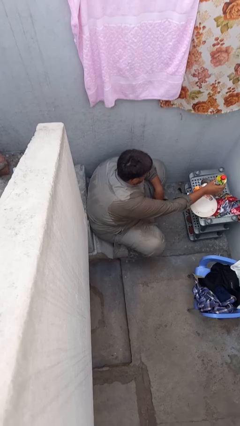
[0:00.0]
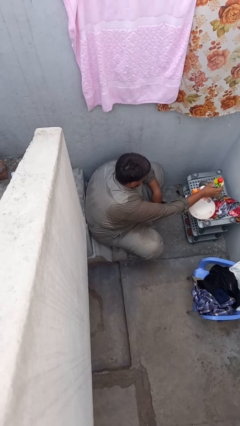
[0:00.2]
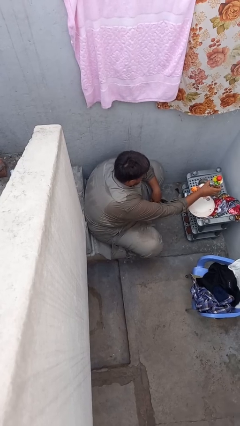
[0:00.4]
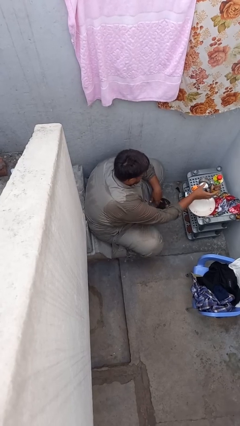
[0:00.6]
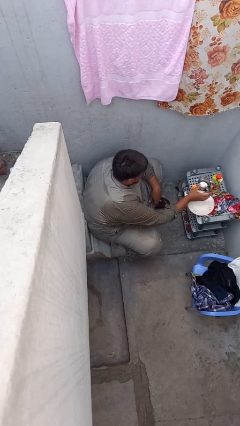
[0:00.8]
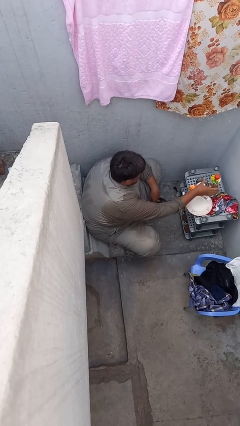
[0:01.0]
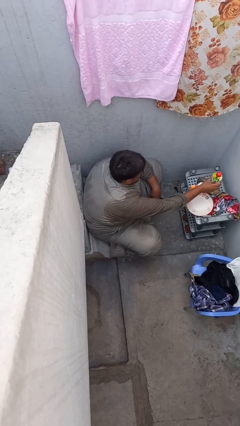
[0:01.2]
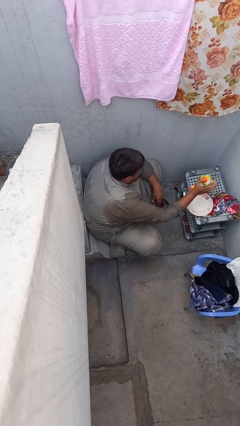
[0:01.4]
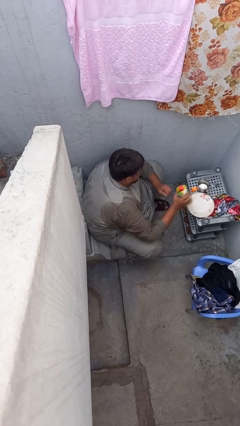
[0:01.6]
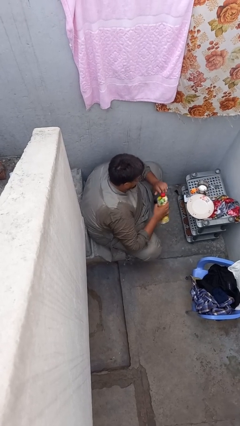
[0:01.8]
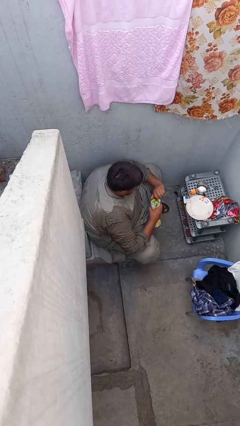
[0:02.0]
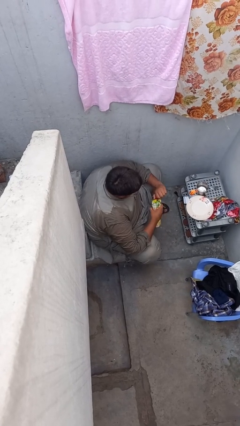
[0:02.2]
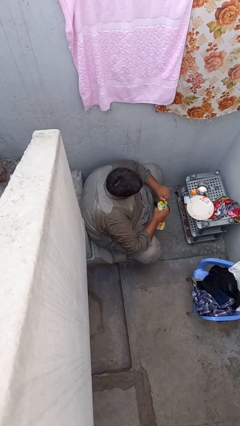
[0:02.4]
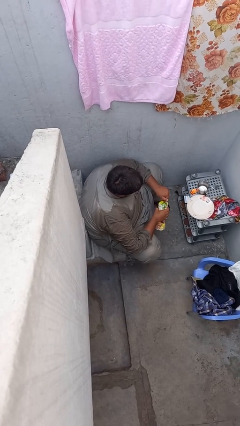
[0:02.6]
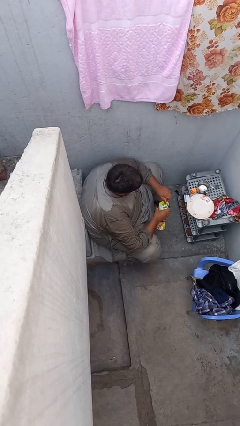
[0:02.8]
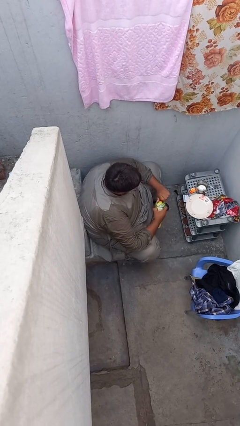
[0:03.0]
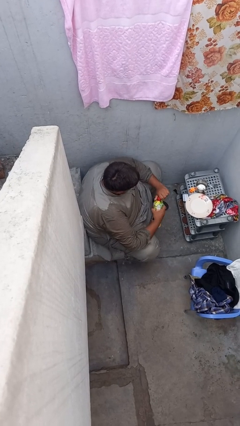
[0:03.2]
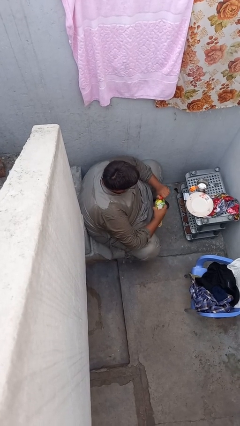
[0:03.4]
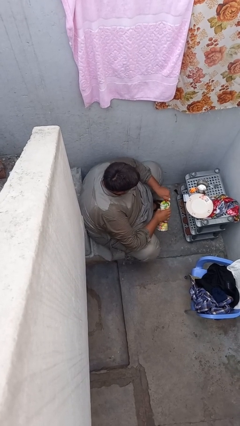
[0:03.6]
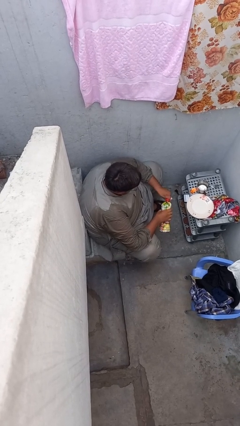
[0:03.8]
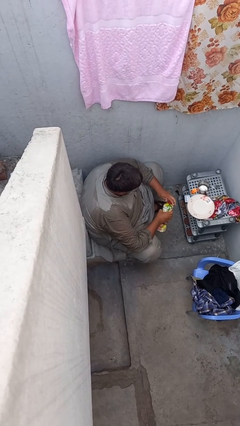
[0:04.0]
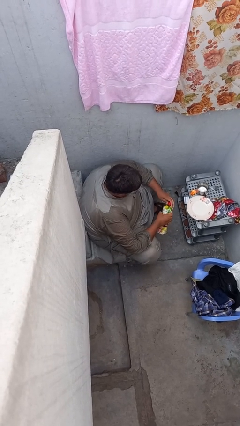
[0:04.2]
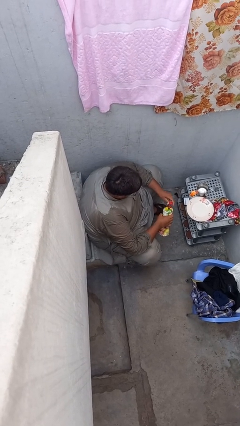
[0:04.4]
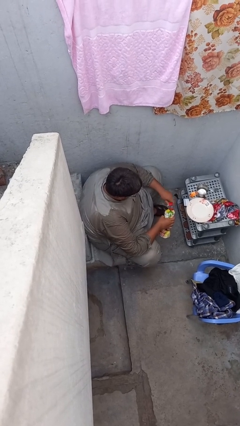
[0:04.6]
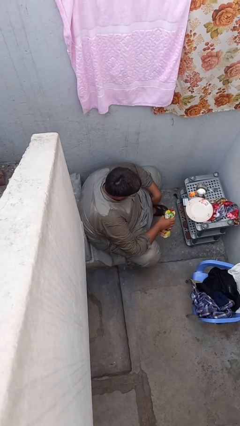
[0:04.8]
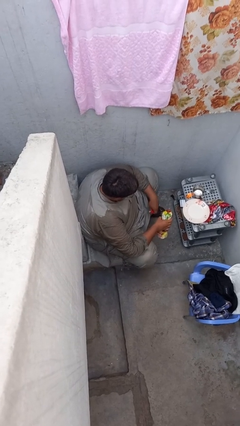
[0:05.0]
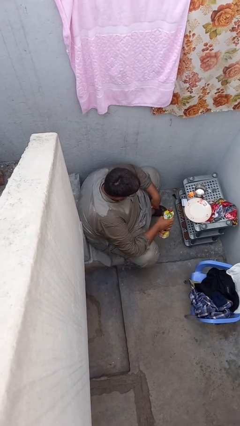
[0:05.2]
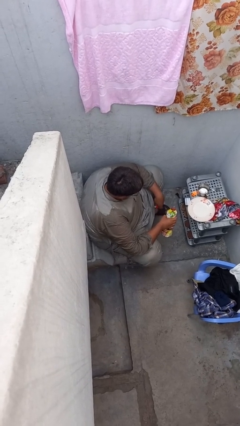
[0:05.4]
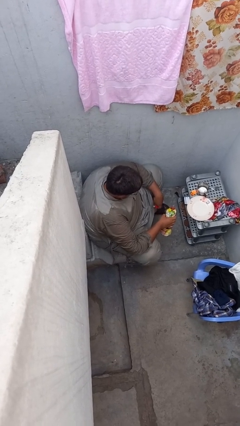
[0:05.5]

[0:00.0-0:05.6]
person unscrews lid from bottle

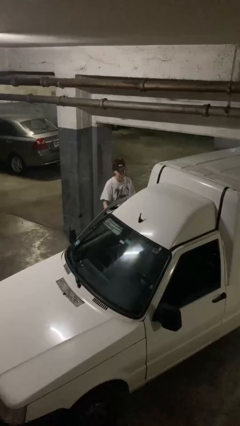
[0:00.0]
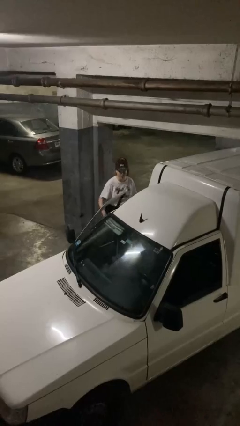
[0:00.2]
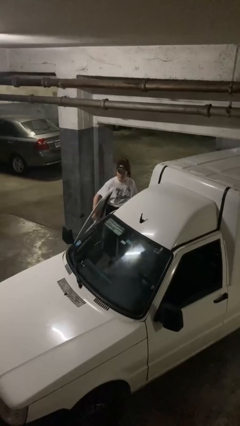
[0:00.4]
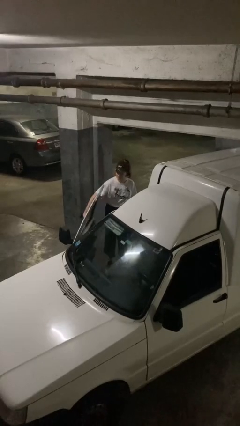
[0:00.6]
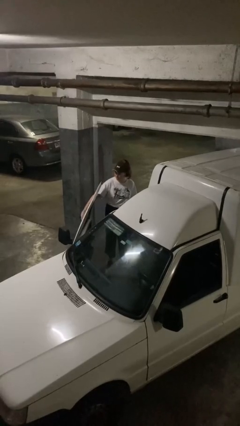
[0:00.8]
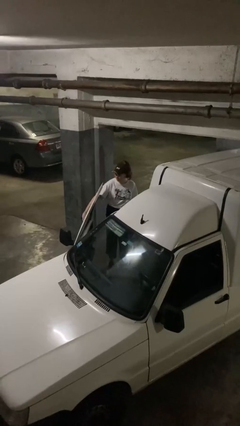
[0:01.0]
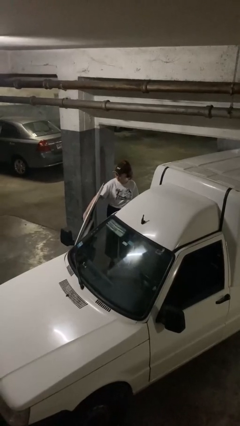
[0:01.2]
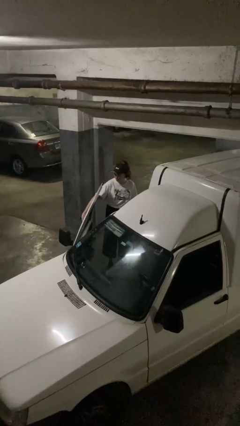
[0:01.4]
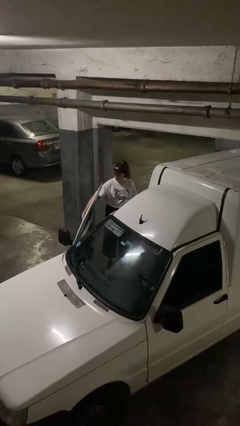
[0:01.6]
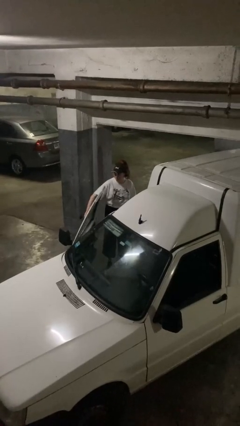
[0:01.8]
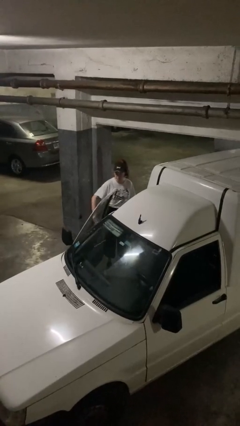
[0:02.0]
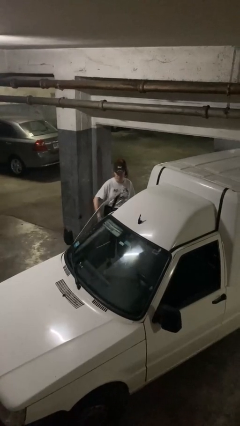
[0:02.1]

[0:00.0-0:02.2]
person opens car door

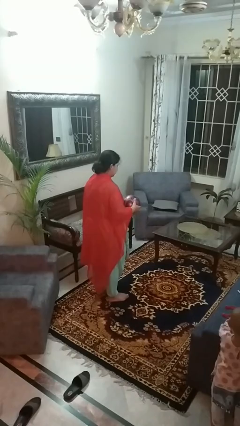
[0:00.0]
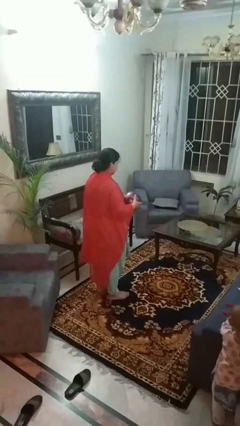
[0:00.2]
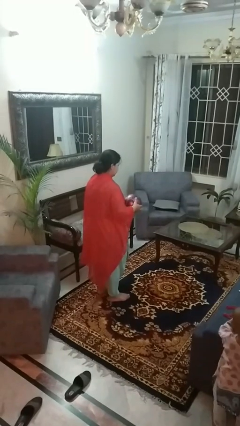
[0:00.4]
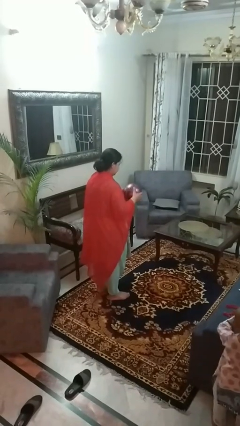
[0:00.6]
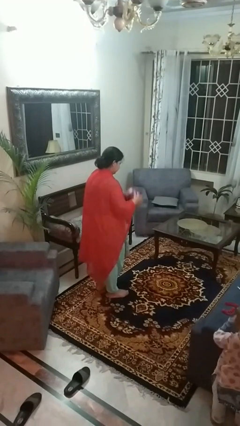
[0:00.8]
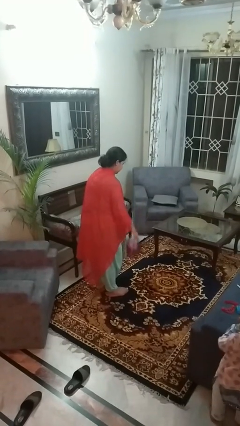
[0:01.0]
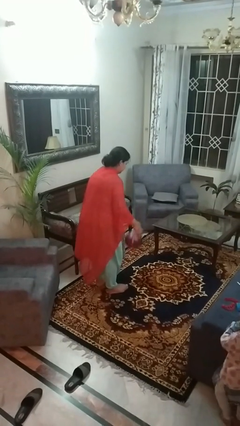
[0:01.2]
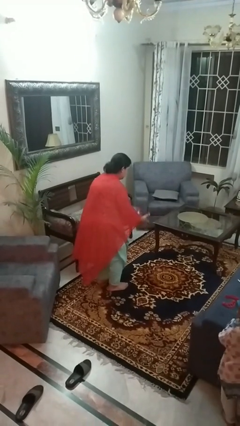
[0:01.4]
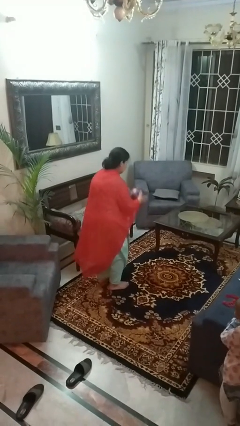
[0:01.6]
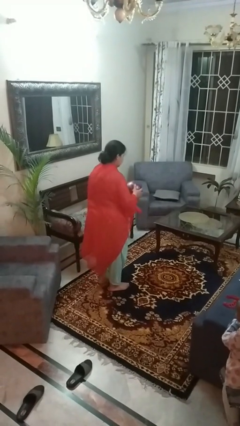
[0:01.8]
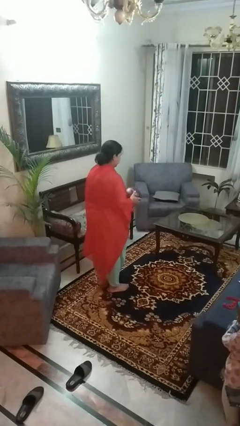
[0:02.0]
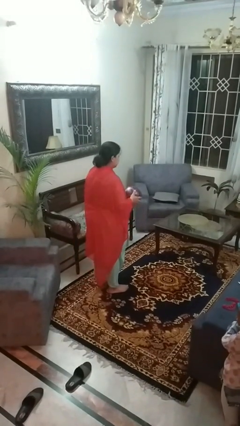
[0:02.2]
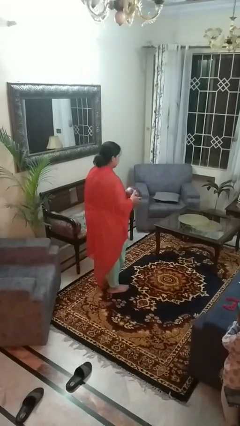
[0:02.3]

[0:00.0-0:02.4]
person bounces ball on floor

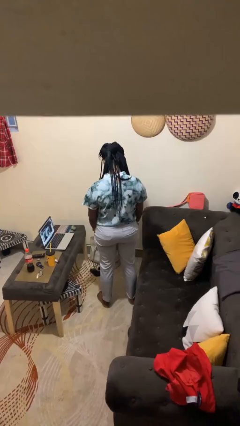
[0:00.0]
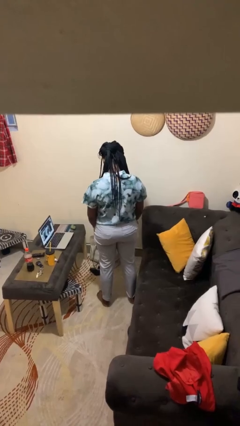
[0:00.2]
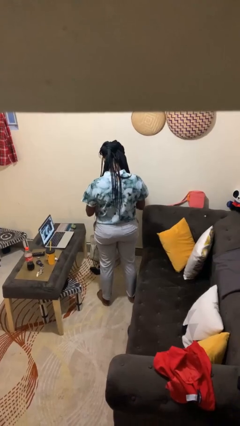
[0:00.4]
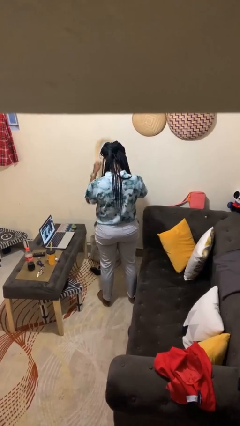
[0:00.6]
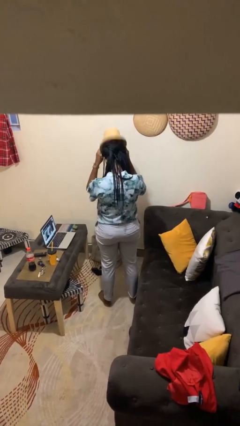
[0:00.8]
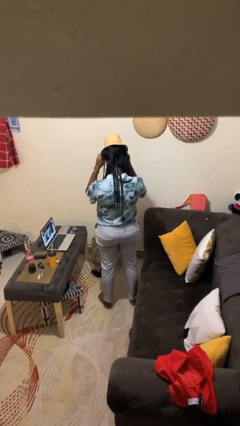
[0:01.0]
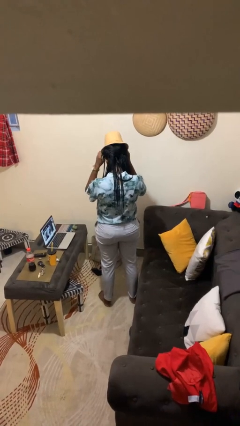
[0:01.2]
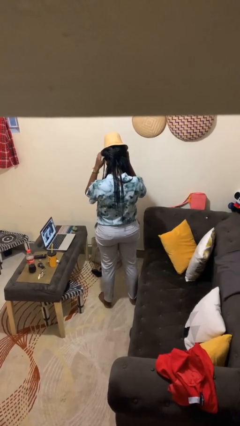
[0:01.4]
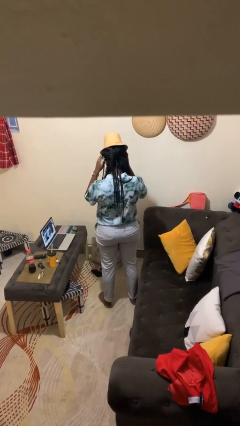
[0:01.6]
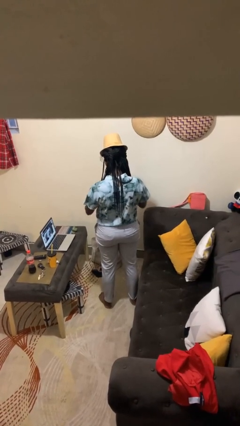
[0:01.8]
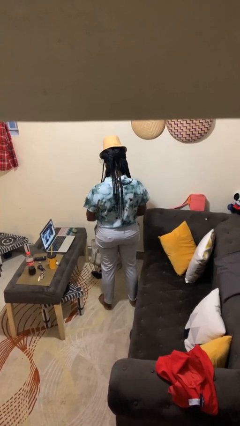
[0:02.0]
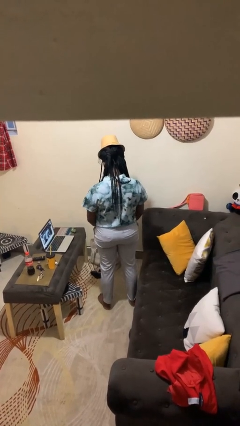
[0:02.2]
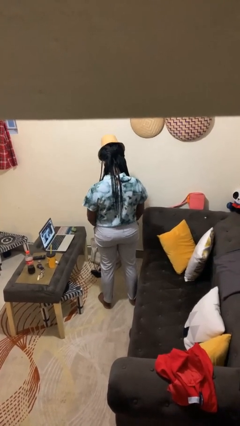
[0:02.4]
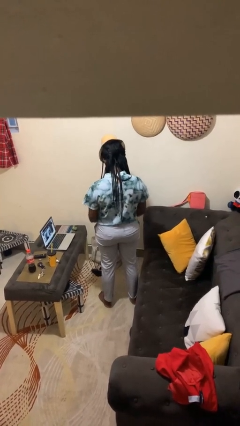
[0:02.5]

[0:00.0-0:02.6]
person puts on hat

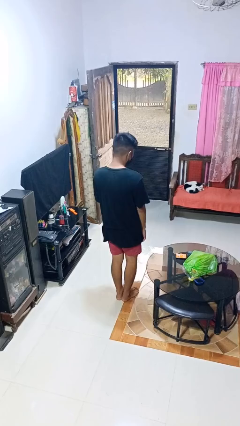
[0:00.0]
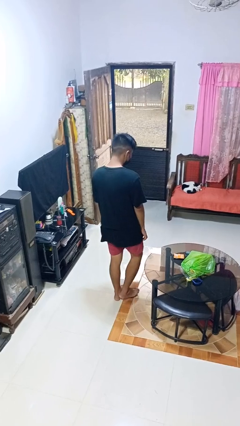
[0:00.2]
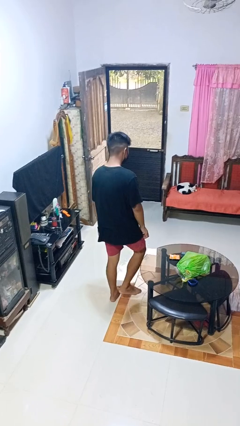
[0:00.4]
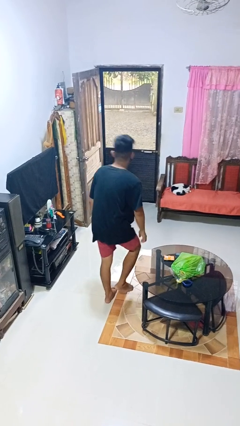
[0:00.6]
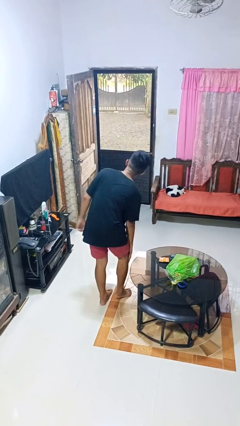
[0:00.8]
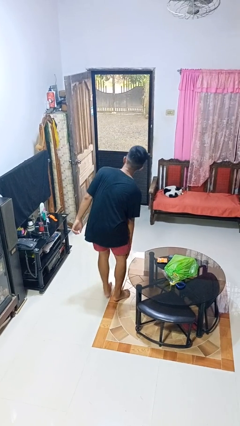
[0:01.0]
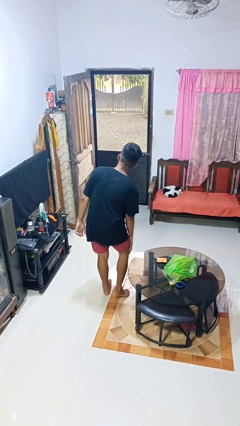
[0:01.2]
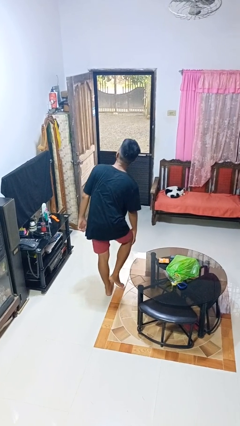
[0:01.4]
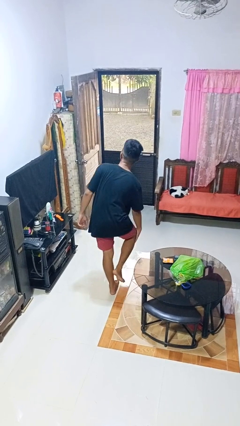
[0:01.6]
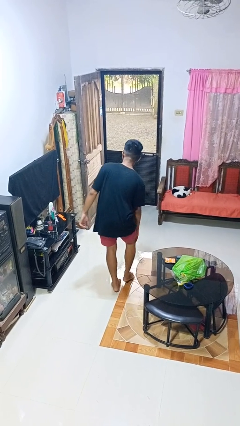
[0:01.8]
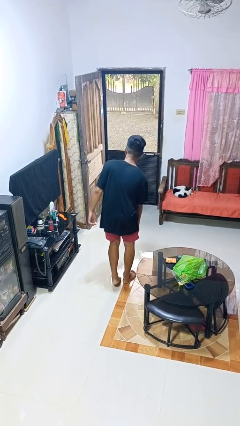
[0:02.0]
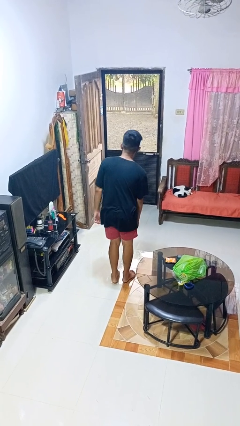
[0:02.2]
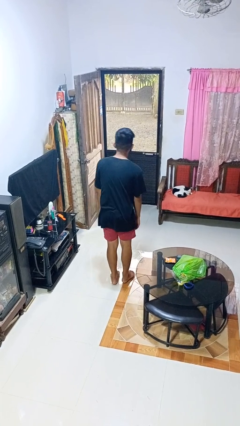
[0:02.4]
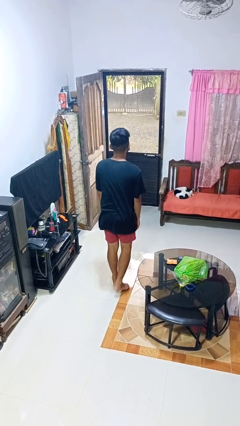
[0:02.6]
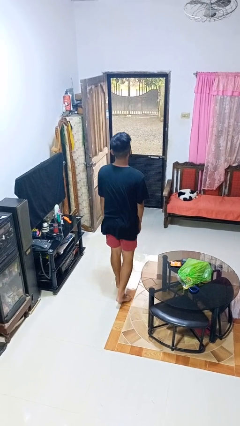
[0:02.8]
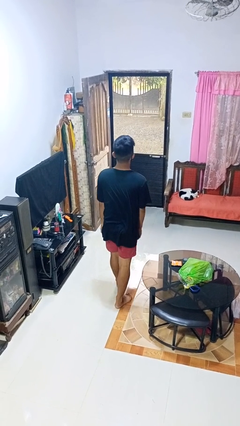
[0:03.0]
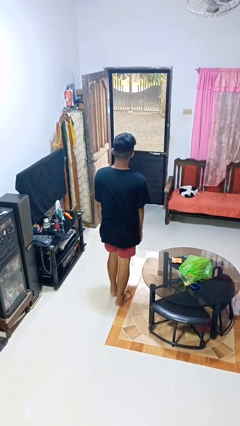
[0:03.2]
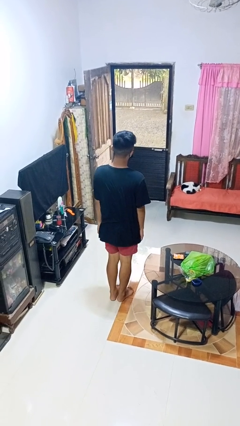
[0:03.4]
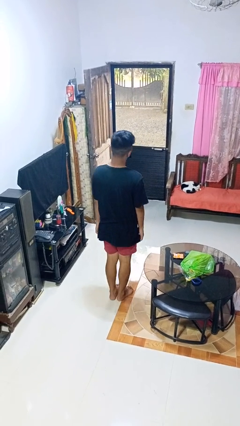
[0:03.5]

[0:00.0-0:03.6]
person bumps into table

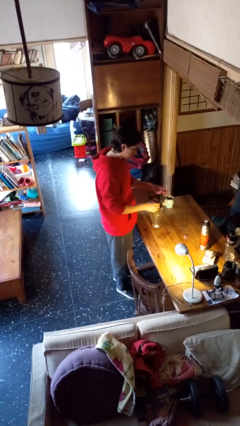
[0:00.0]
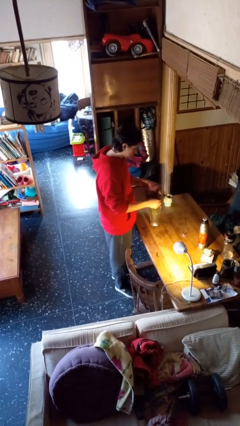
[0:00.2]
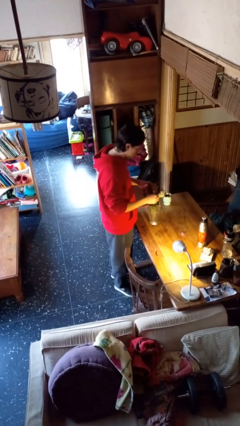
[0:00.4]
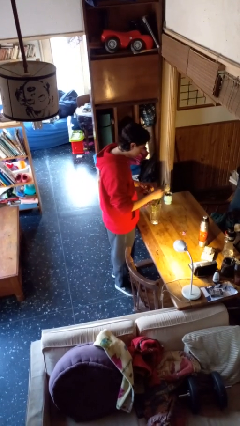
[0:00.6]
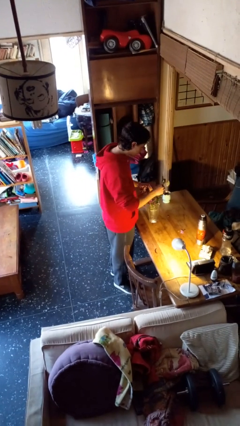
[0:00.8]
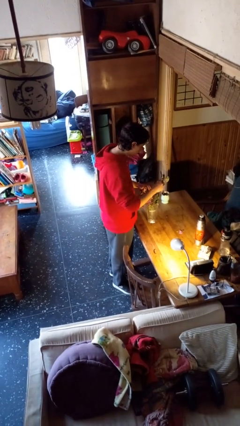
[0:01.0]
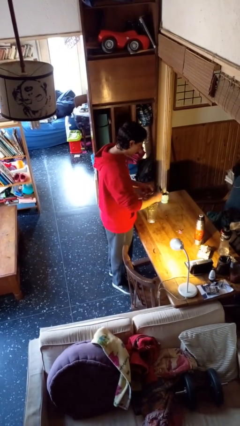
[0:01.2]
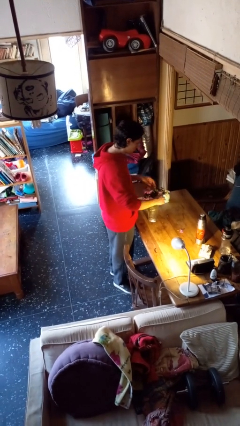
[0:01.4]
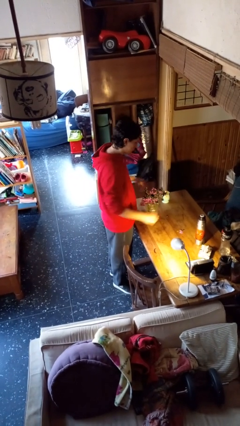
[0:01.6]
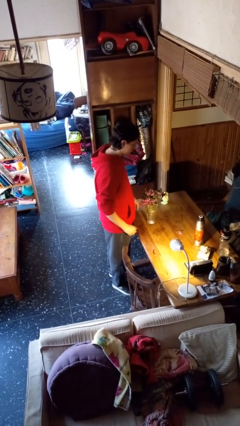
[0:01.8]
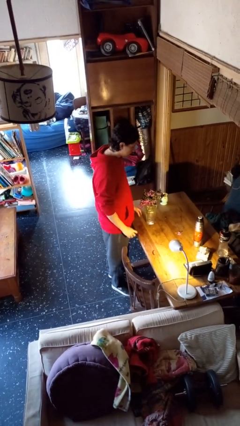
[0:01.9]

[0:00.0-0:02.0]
person arranges flowers in vase
